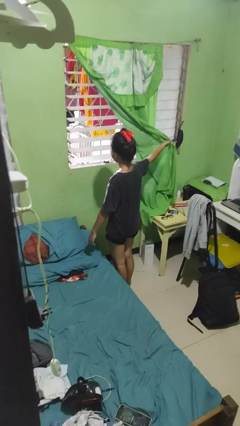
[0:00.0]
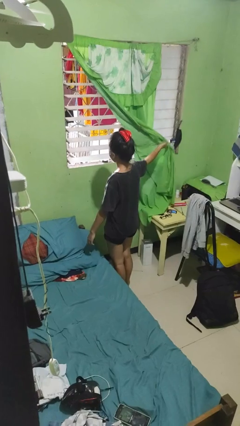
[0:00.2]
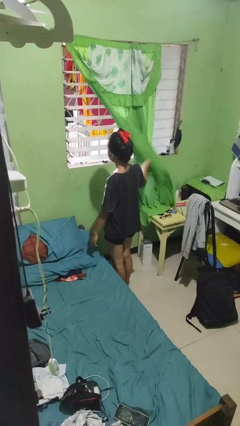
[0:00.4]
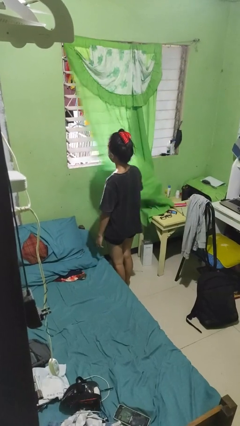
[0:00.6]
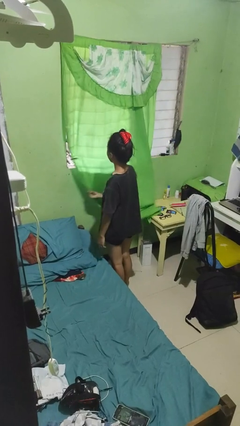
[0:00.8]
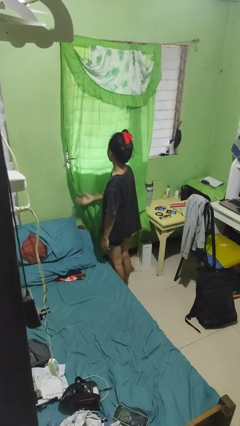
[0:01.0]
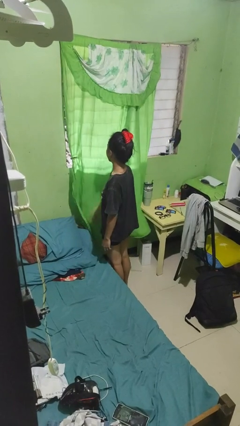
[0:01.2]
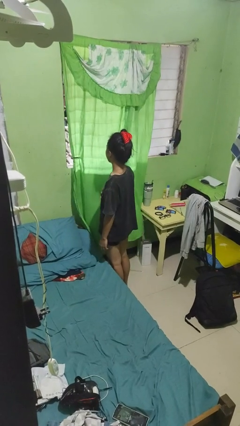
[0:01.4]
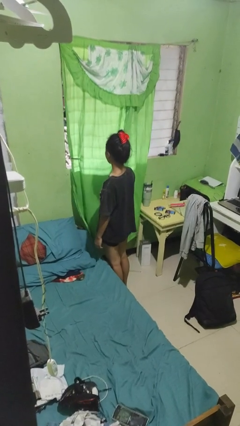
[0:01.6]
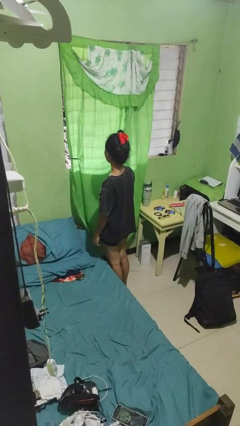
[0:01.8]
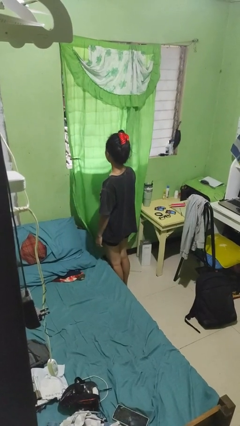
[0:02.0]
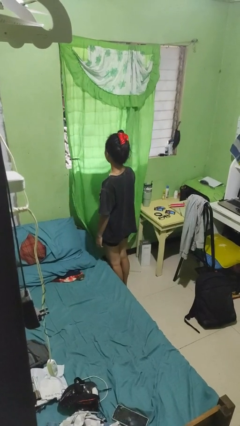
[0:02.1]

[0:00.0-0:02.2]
person closes curtains

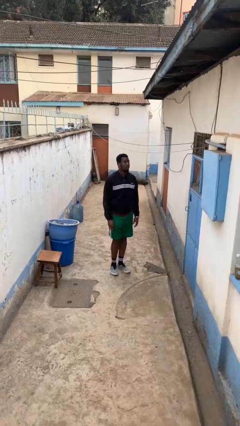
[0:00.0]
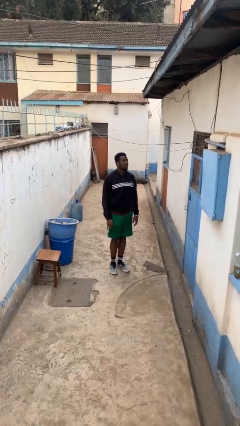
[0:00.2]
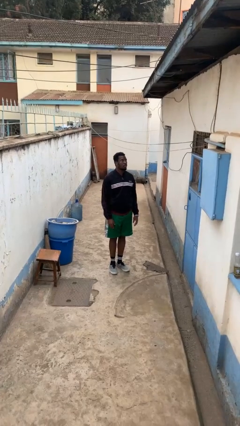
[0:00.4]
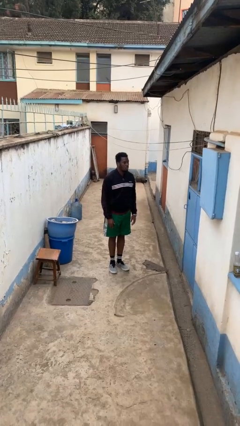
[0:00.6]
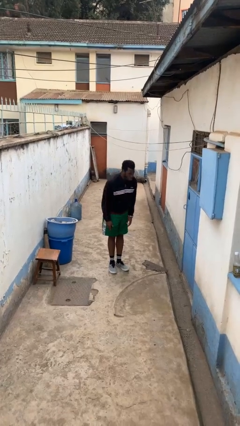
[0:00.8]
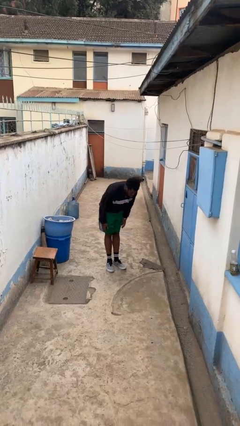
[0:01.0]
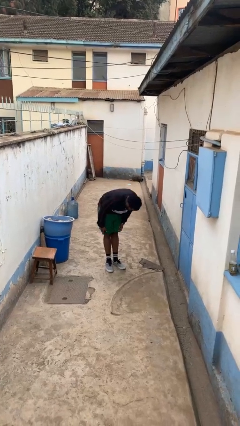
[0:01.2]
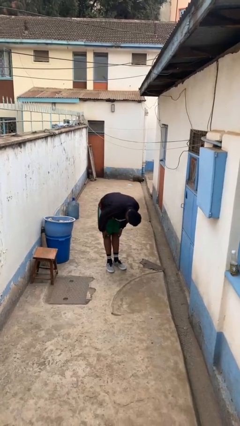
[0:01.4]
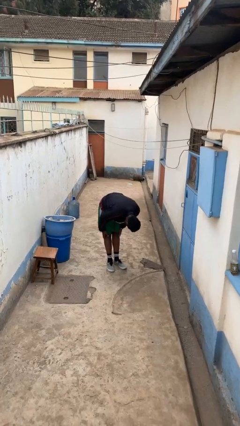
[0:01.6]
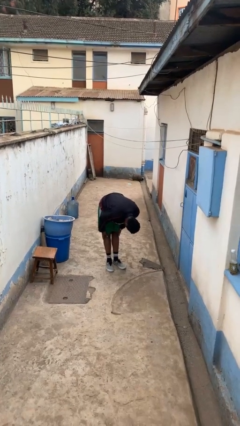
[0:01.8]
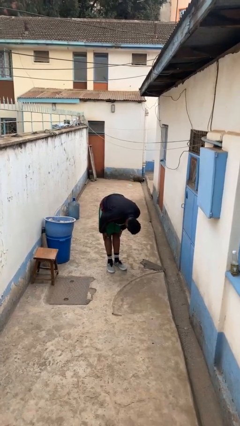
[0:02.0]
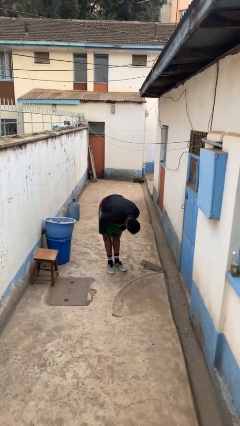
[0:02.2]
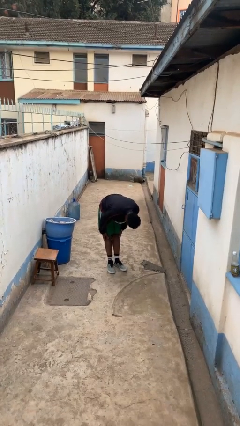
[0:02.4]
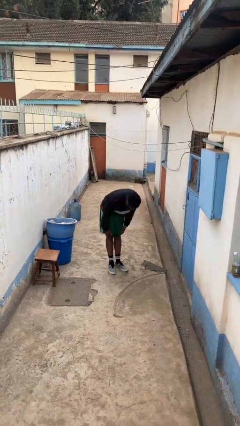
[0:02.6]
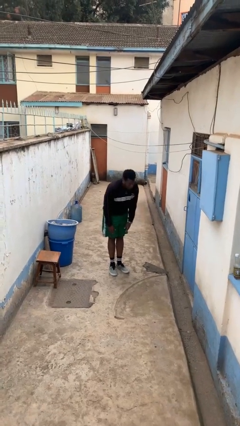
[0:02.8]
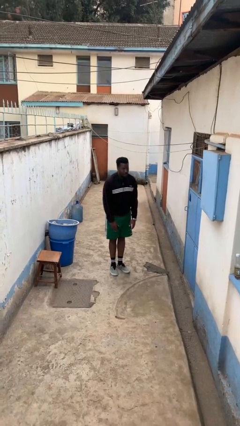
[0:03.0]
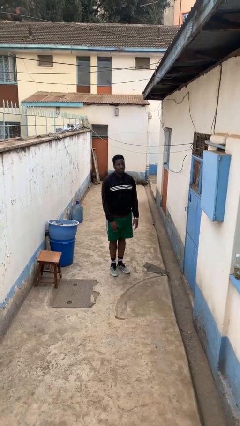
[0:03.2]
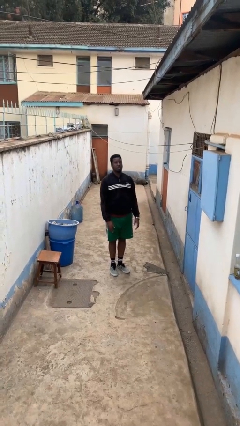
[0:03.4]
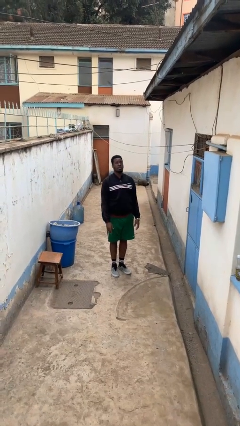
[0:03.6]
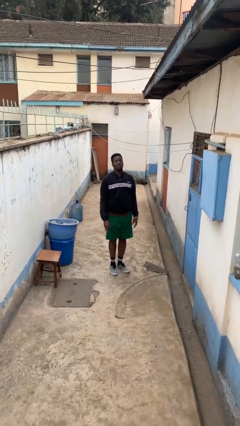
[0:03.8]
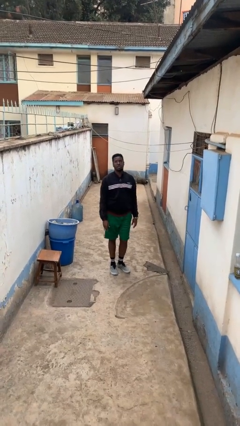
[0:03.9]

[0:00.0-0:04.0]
person bows

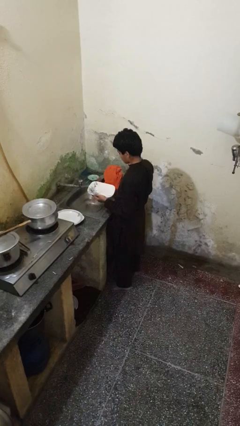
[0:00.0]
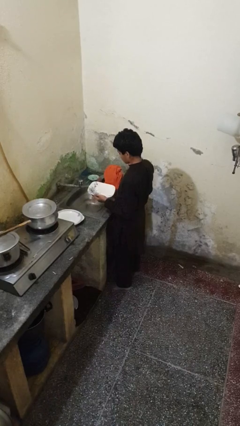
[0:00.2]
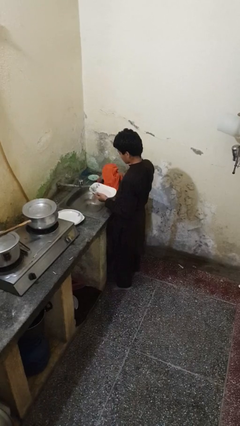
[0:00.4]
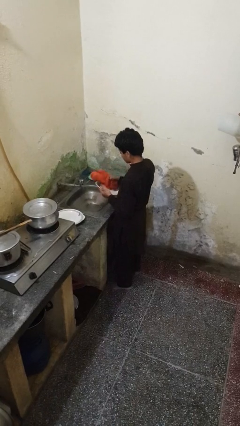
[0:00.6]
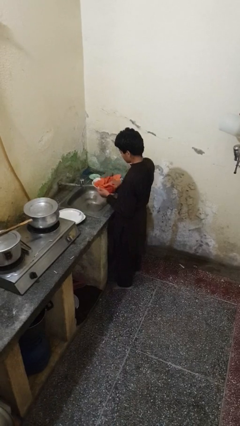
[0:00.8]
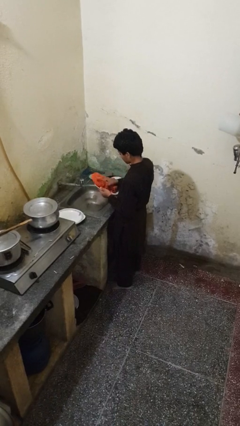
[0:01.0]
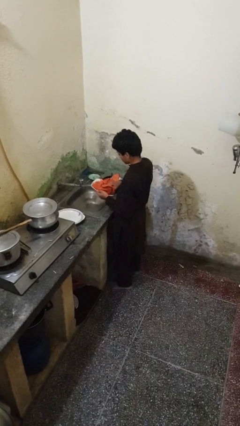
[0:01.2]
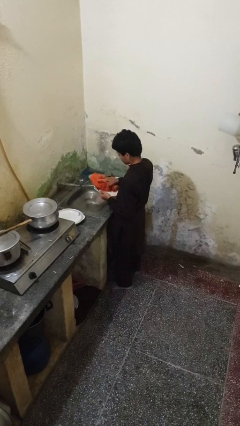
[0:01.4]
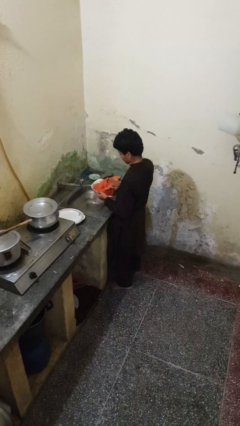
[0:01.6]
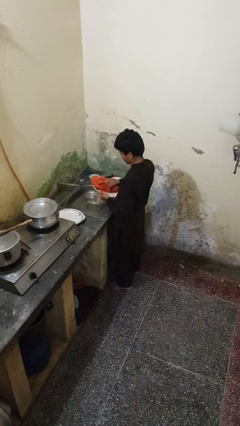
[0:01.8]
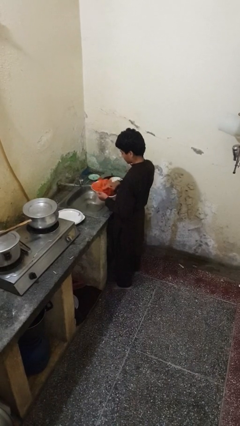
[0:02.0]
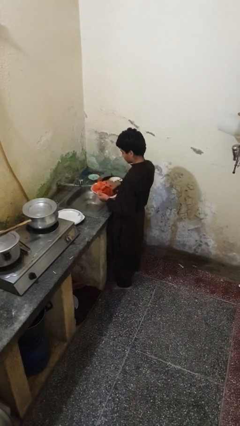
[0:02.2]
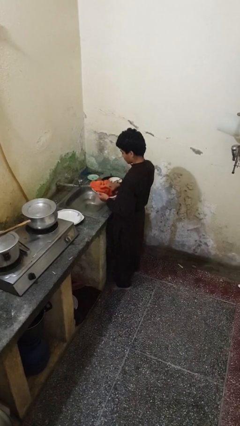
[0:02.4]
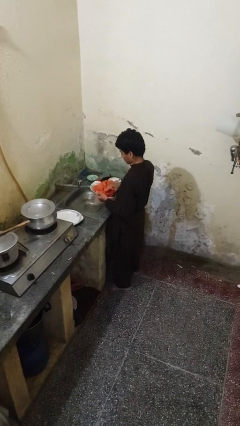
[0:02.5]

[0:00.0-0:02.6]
person dries dish

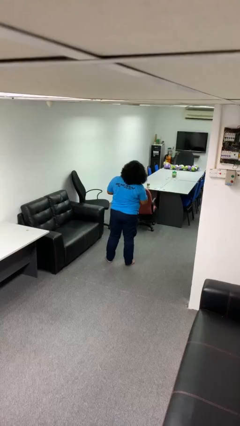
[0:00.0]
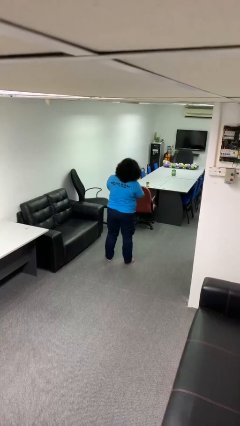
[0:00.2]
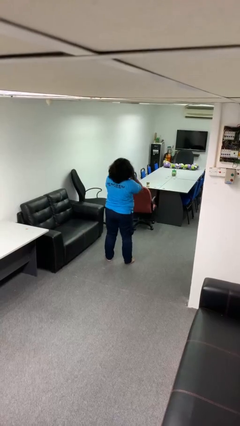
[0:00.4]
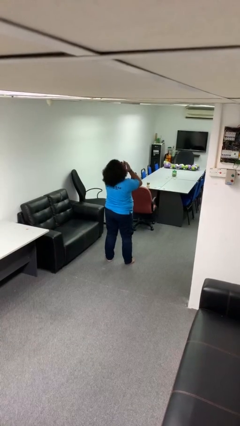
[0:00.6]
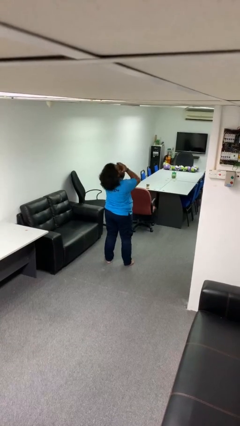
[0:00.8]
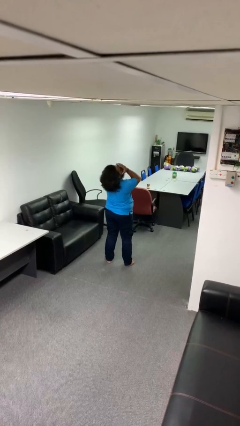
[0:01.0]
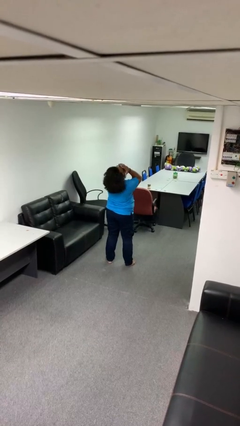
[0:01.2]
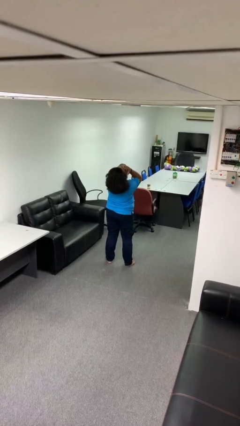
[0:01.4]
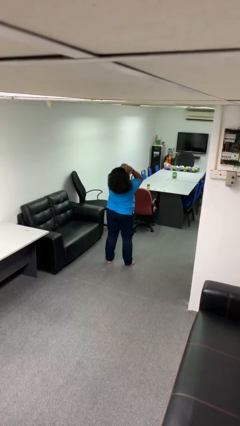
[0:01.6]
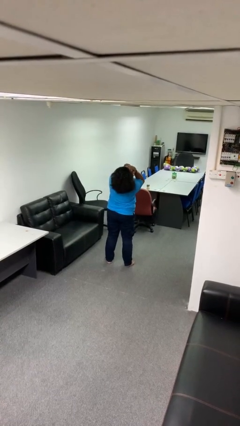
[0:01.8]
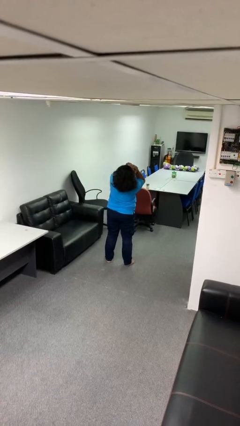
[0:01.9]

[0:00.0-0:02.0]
person covers face with hands

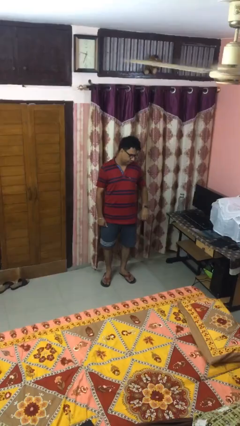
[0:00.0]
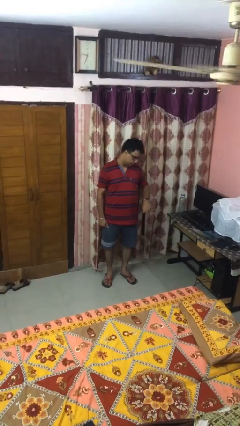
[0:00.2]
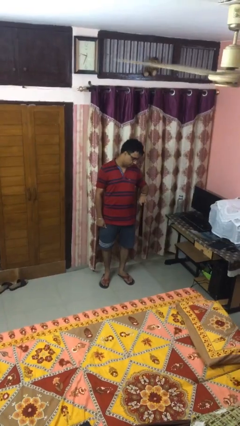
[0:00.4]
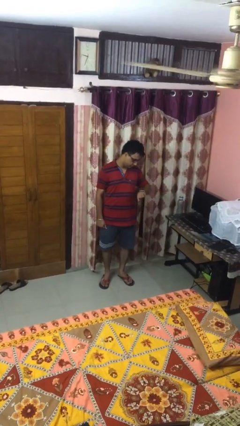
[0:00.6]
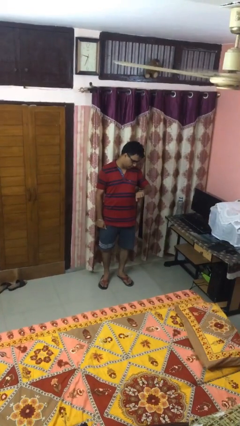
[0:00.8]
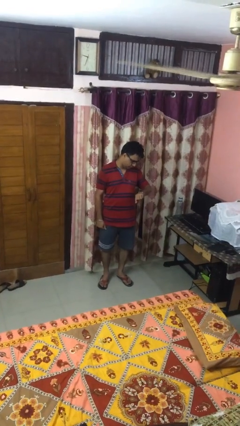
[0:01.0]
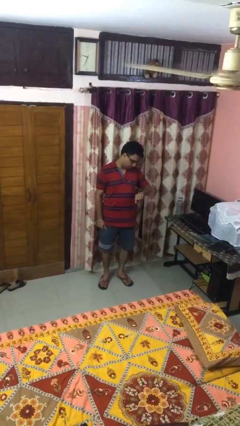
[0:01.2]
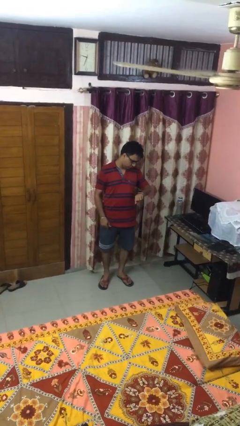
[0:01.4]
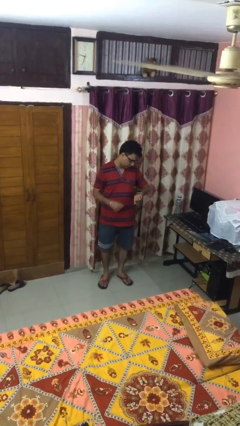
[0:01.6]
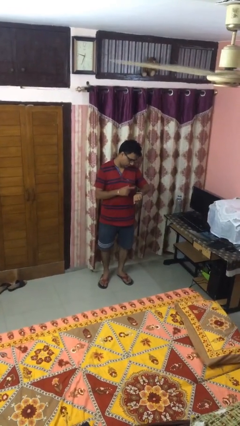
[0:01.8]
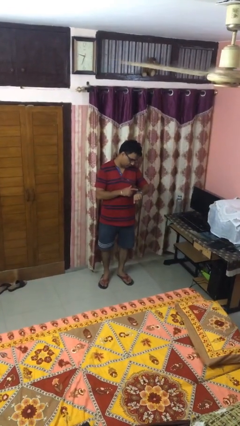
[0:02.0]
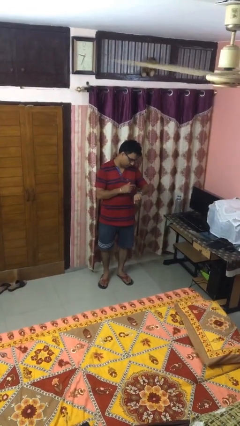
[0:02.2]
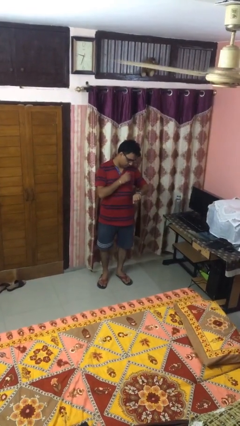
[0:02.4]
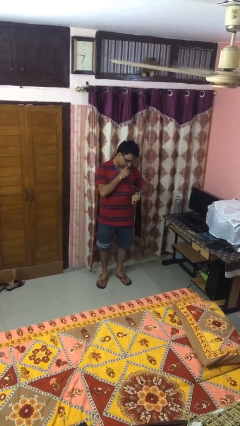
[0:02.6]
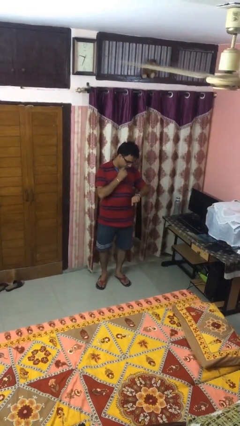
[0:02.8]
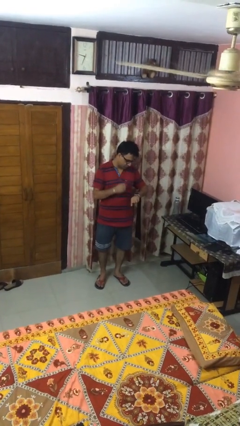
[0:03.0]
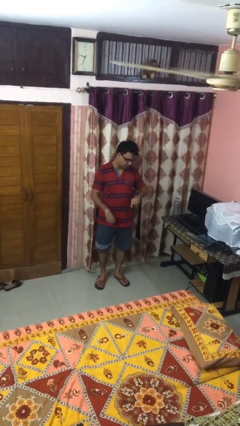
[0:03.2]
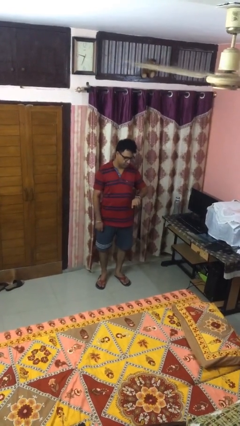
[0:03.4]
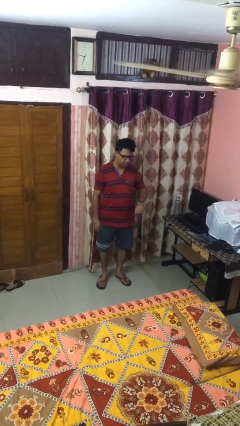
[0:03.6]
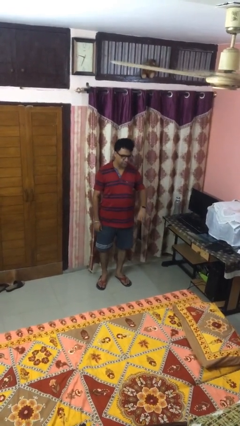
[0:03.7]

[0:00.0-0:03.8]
person looks at wristwatch

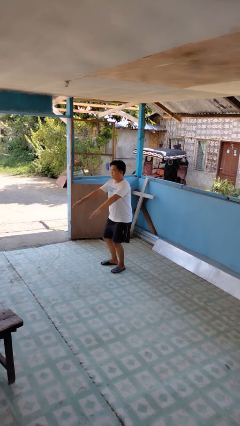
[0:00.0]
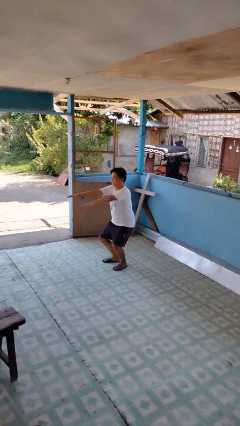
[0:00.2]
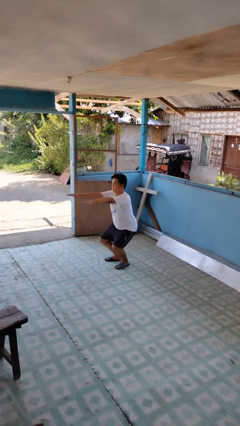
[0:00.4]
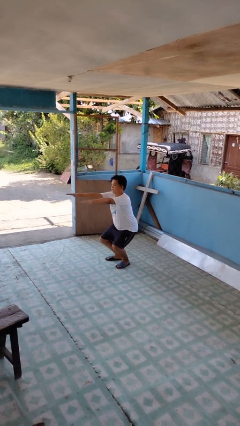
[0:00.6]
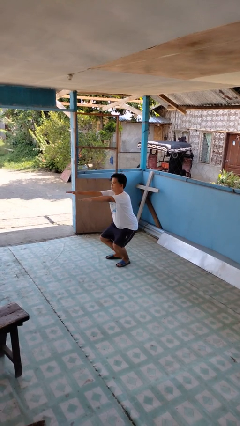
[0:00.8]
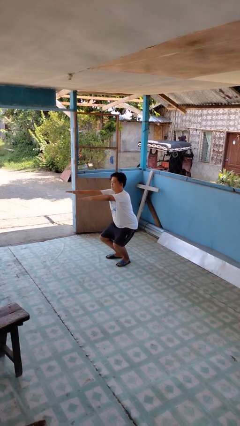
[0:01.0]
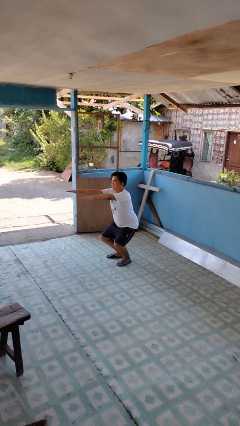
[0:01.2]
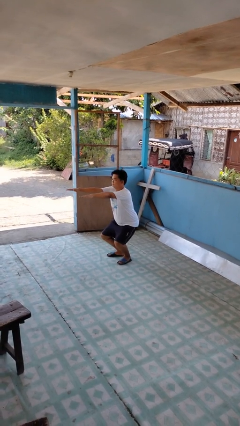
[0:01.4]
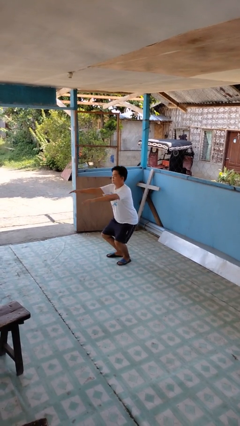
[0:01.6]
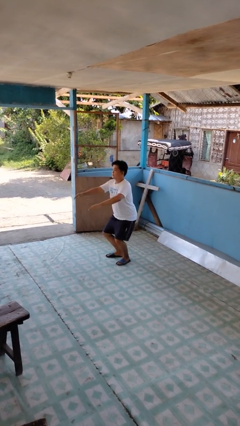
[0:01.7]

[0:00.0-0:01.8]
person squats

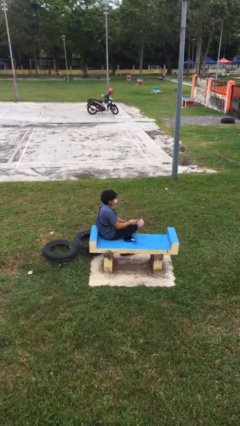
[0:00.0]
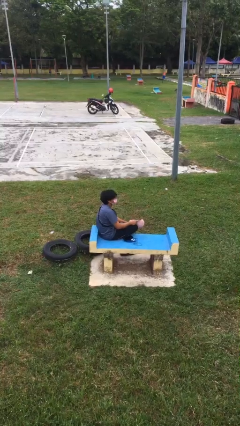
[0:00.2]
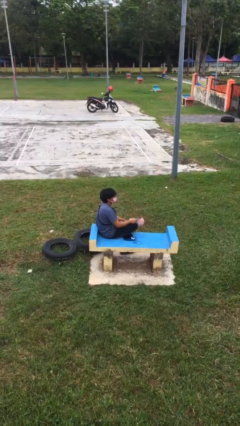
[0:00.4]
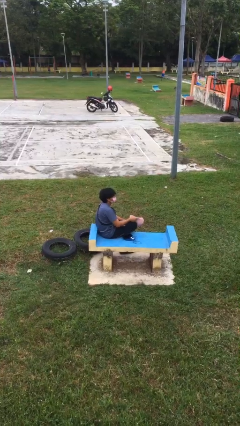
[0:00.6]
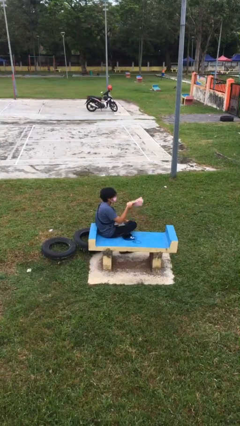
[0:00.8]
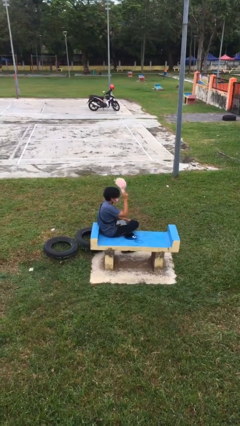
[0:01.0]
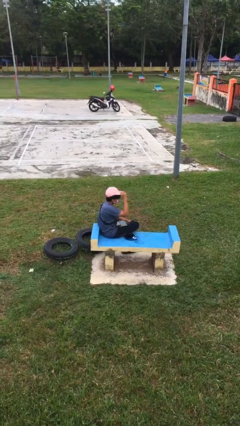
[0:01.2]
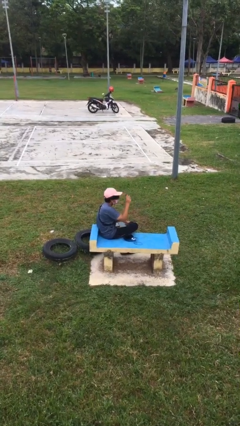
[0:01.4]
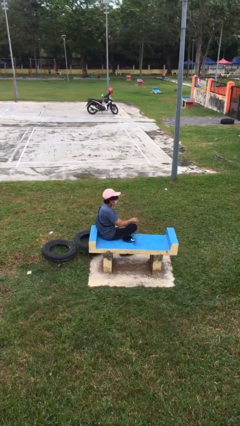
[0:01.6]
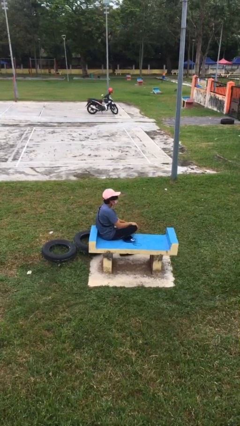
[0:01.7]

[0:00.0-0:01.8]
person puts on hat
